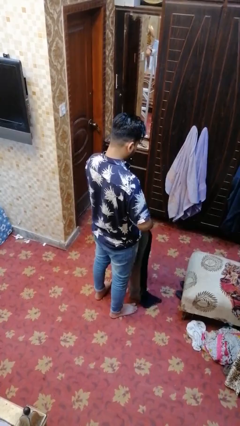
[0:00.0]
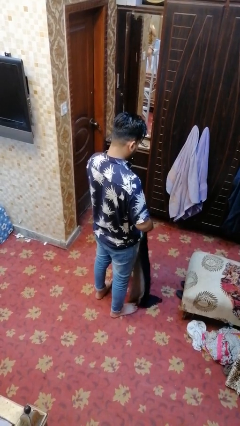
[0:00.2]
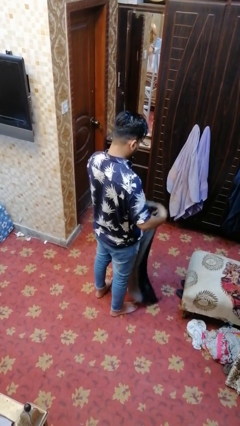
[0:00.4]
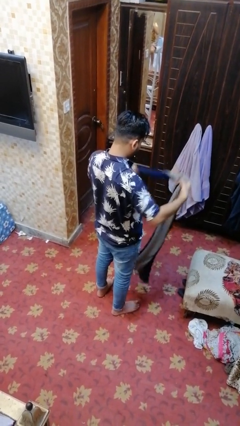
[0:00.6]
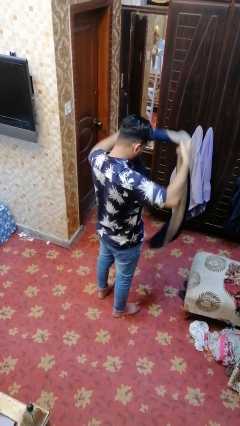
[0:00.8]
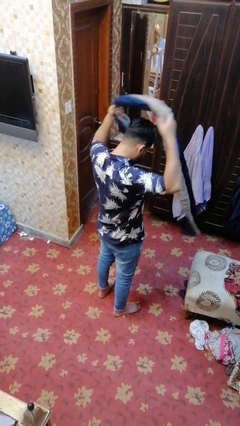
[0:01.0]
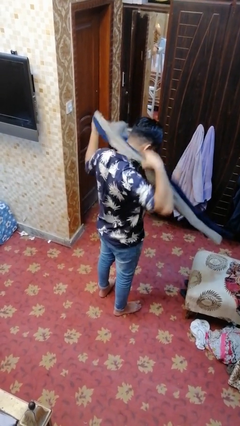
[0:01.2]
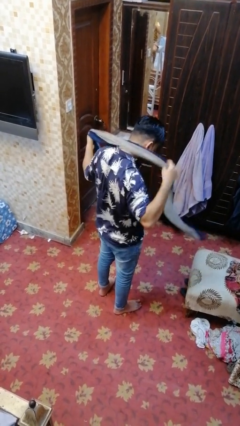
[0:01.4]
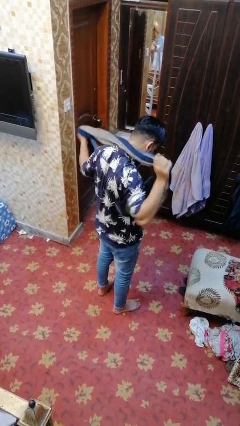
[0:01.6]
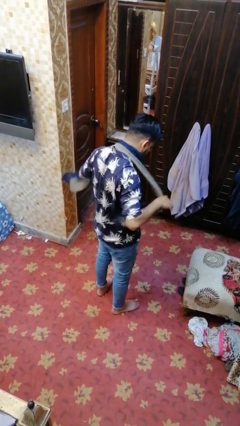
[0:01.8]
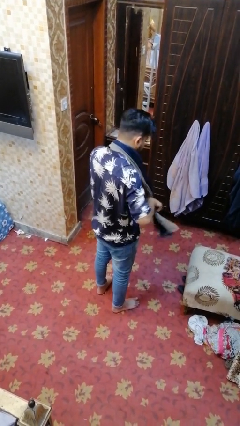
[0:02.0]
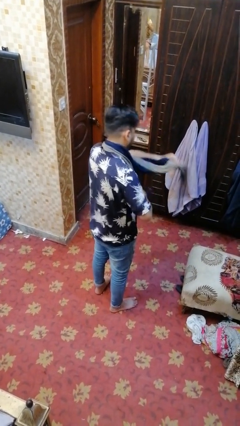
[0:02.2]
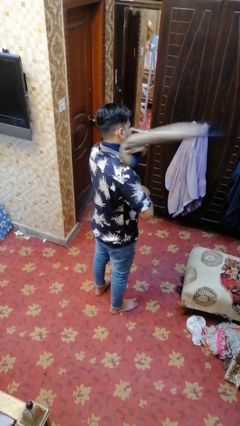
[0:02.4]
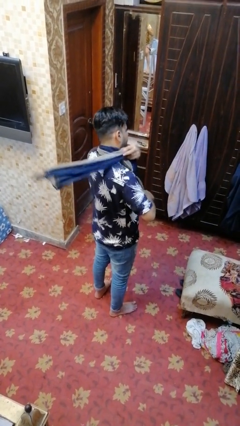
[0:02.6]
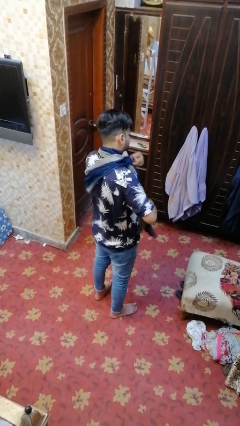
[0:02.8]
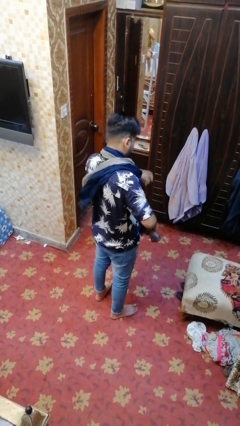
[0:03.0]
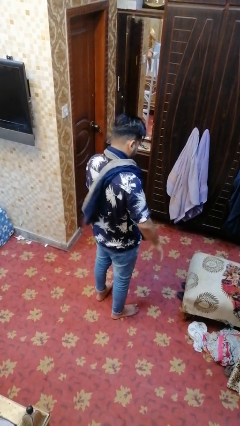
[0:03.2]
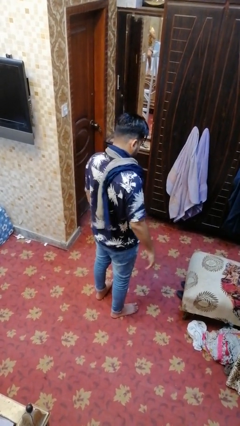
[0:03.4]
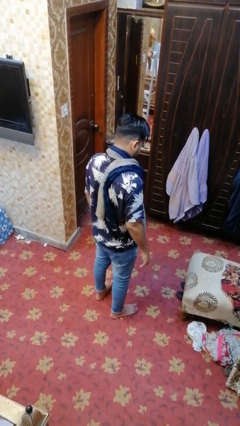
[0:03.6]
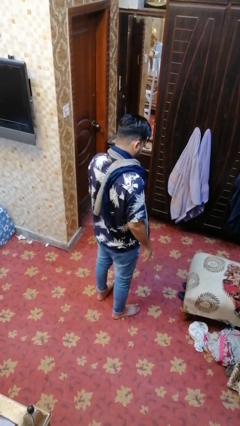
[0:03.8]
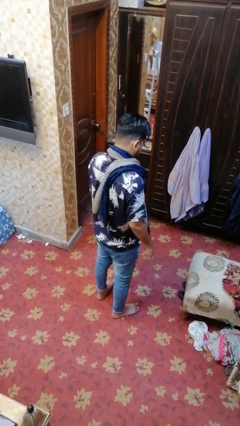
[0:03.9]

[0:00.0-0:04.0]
person puts on scarf

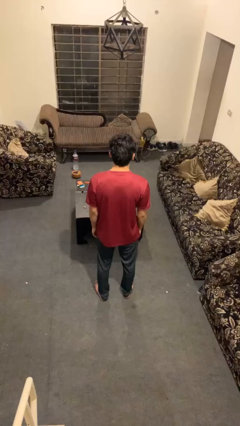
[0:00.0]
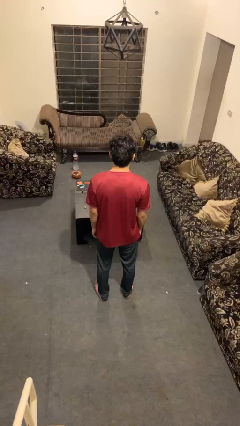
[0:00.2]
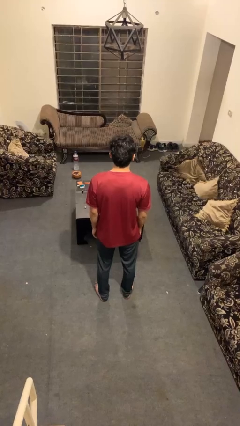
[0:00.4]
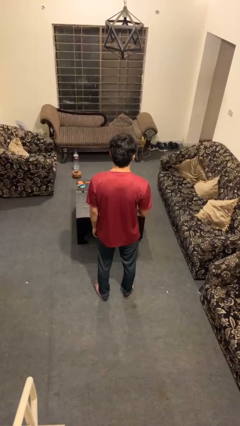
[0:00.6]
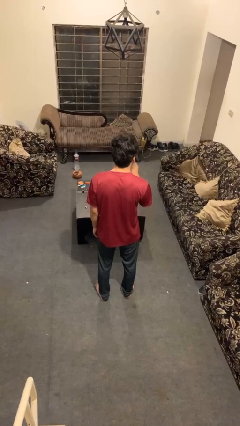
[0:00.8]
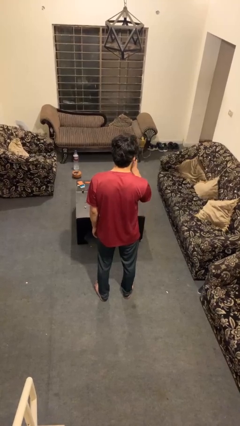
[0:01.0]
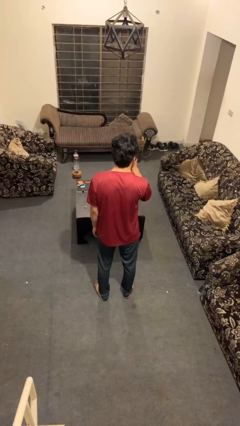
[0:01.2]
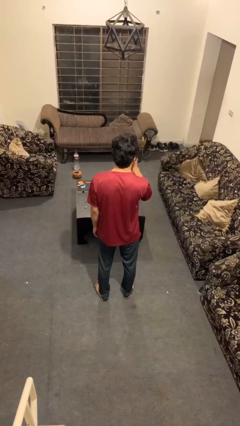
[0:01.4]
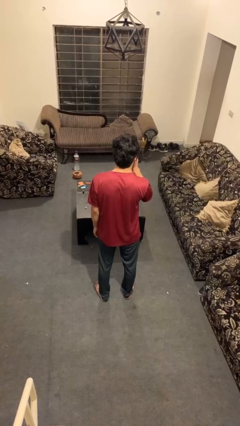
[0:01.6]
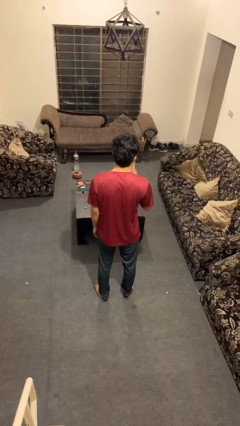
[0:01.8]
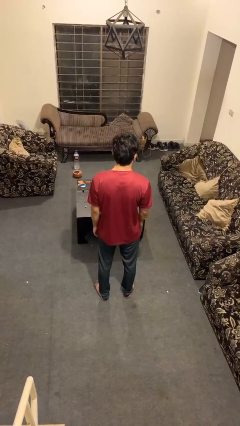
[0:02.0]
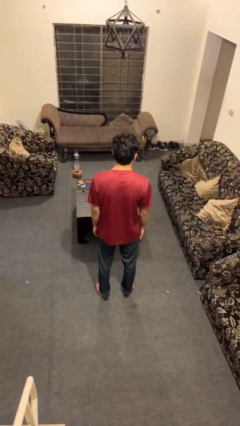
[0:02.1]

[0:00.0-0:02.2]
person gestures be quiet

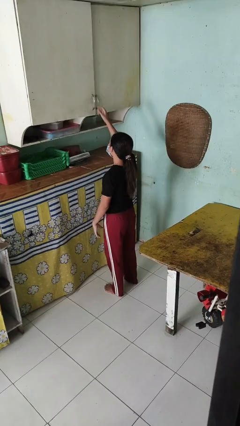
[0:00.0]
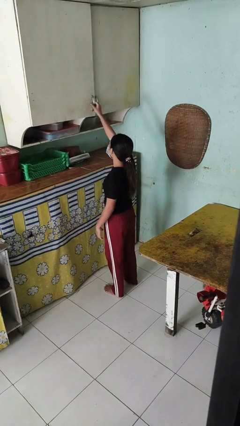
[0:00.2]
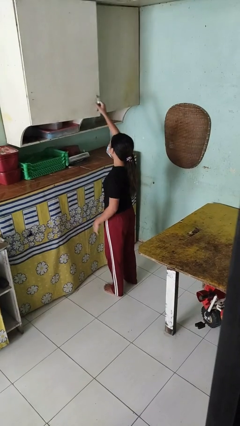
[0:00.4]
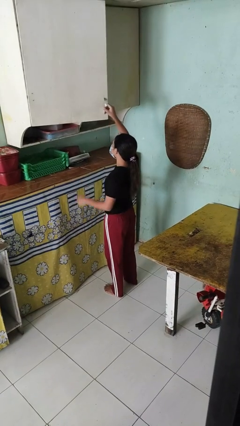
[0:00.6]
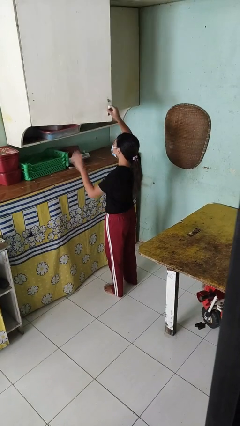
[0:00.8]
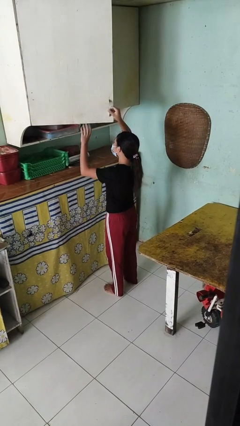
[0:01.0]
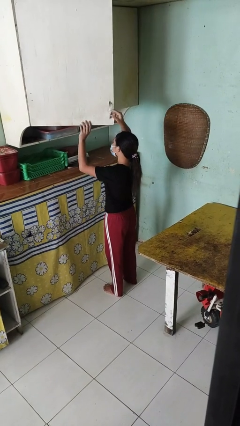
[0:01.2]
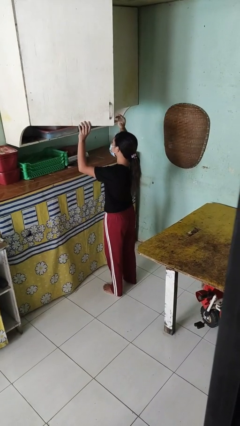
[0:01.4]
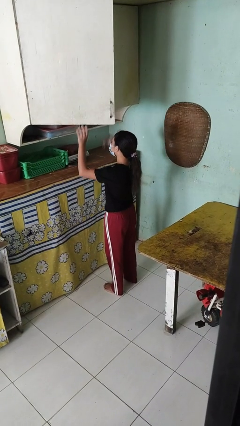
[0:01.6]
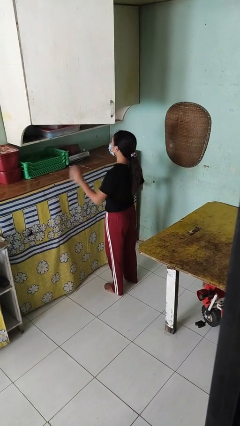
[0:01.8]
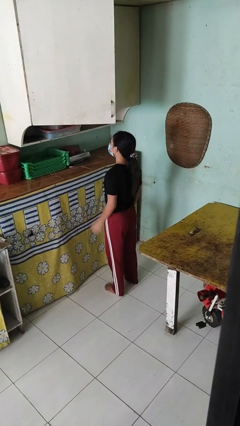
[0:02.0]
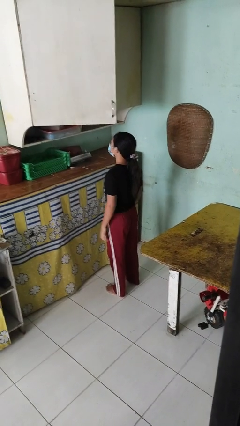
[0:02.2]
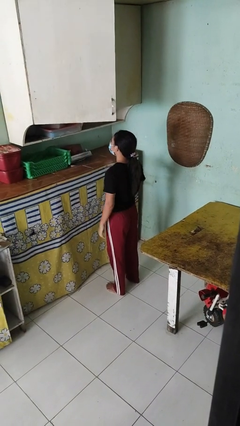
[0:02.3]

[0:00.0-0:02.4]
person opens cabinet

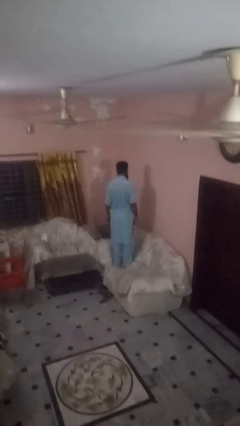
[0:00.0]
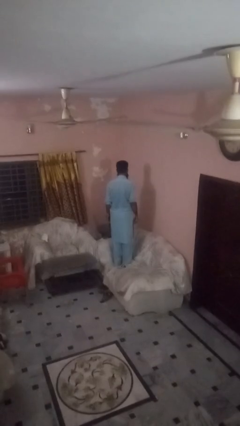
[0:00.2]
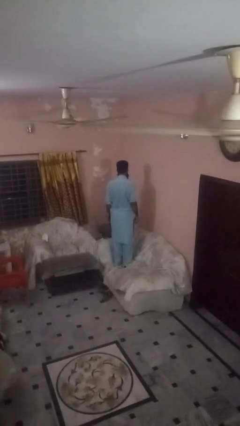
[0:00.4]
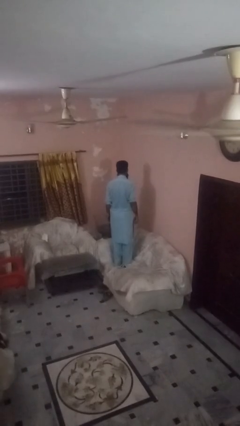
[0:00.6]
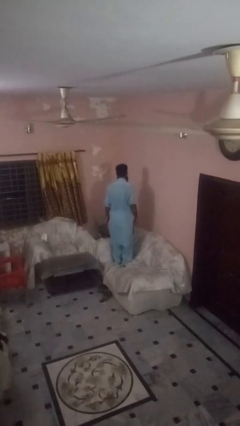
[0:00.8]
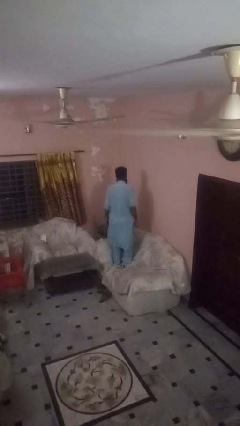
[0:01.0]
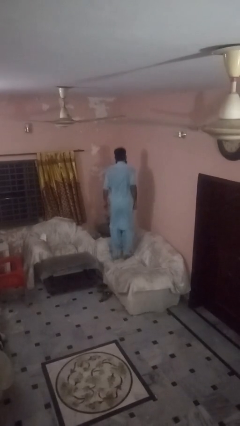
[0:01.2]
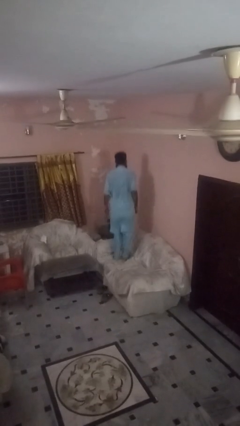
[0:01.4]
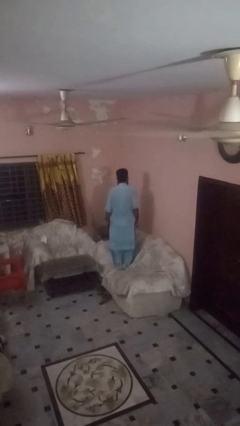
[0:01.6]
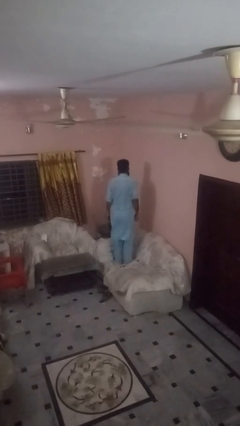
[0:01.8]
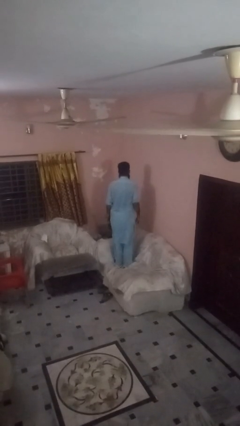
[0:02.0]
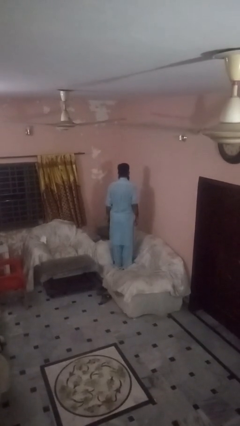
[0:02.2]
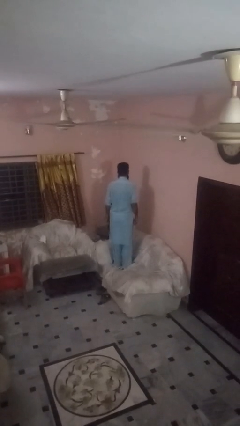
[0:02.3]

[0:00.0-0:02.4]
person jumps on couch

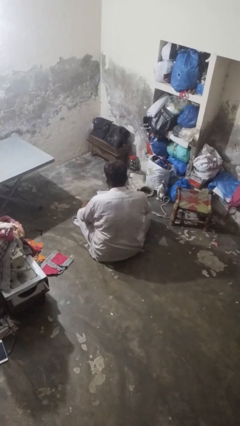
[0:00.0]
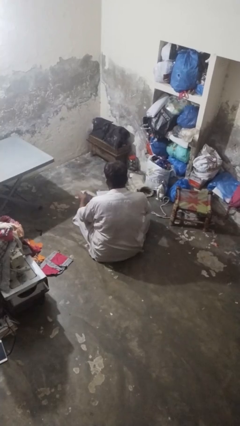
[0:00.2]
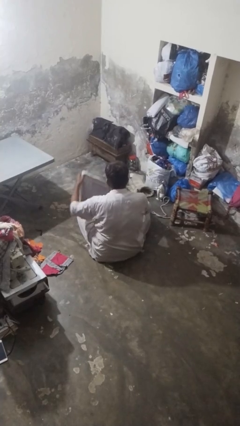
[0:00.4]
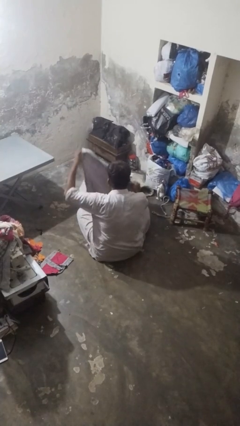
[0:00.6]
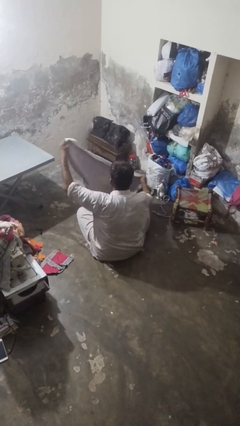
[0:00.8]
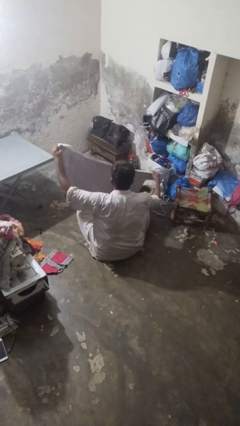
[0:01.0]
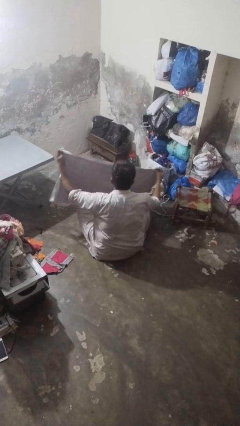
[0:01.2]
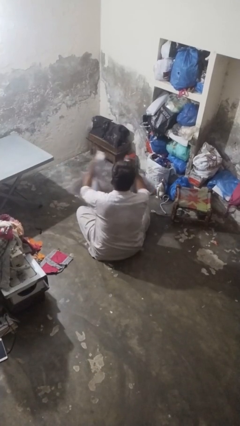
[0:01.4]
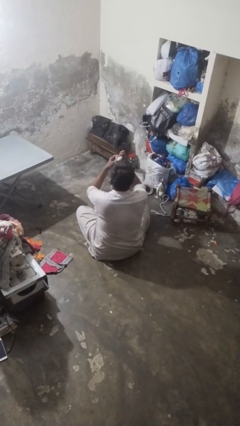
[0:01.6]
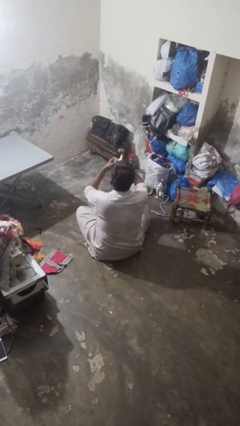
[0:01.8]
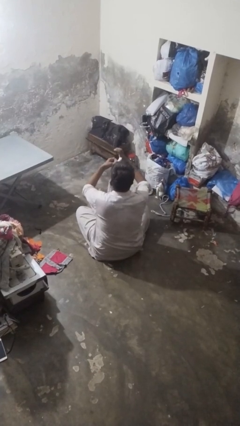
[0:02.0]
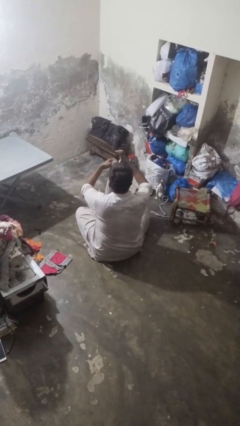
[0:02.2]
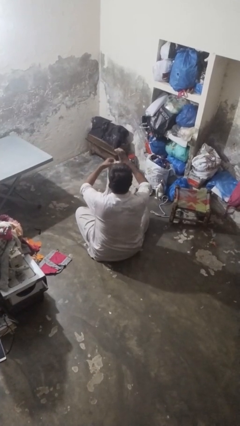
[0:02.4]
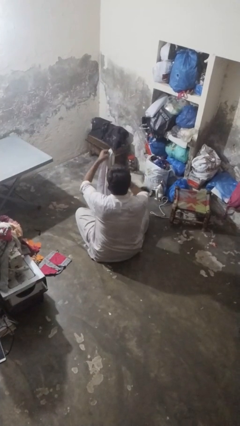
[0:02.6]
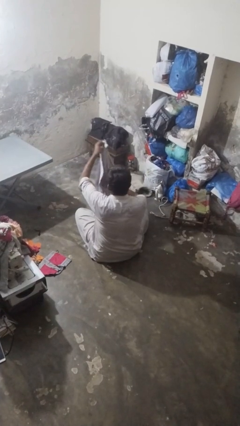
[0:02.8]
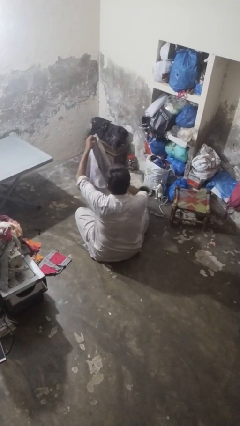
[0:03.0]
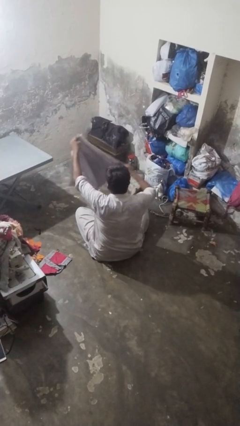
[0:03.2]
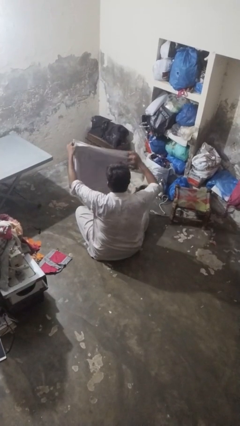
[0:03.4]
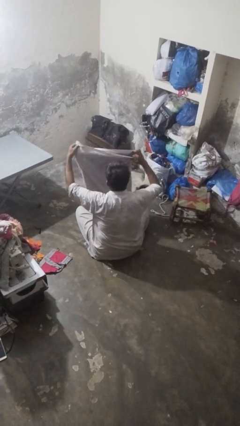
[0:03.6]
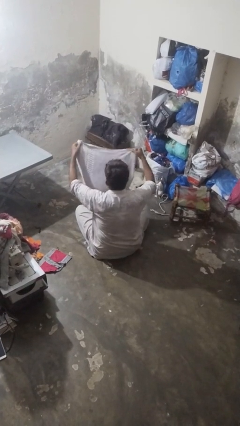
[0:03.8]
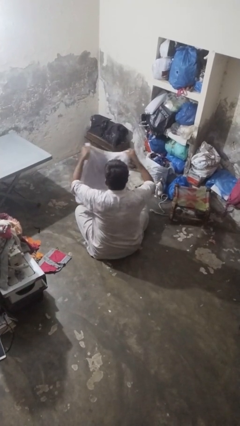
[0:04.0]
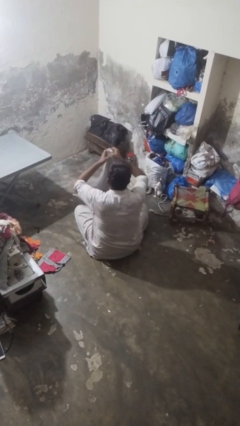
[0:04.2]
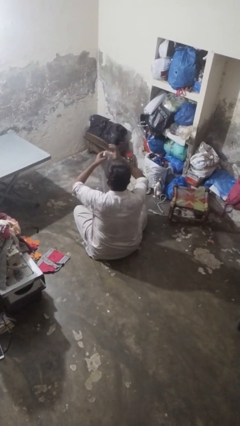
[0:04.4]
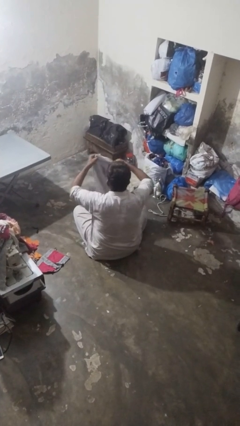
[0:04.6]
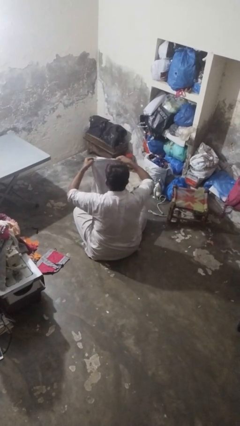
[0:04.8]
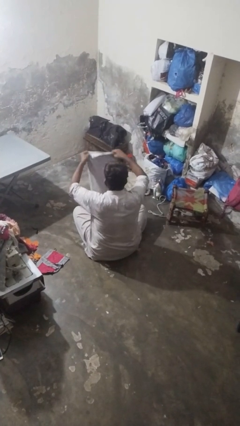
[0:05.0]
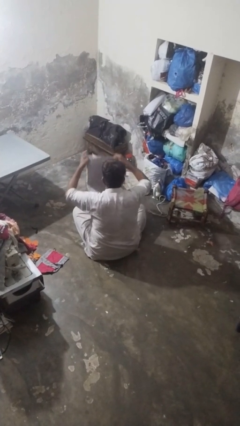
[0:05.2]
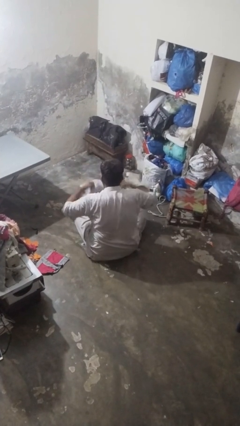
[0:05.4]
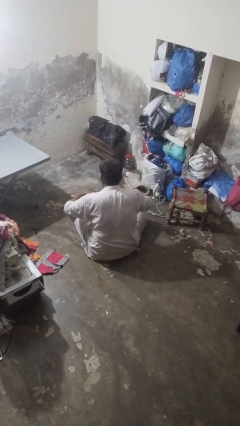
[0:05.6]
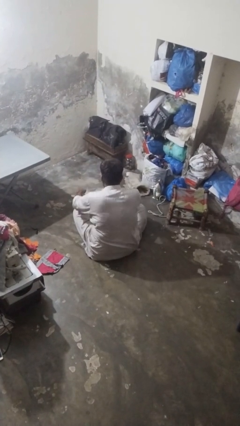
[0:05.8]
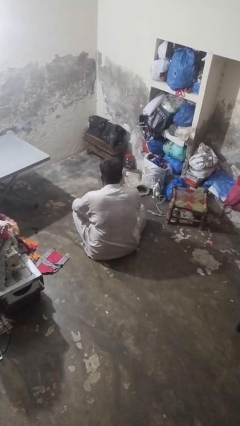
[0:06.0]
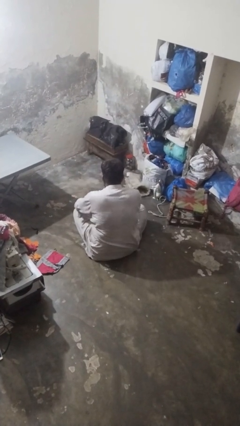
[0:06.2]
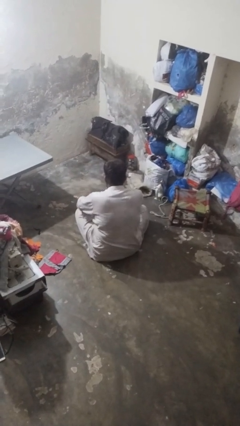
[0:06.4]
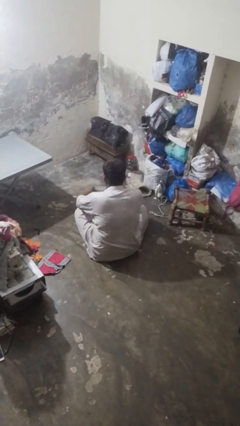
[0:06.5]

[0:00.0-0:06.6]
person folds towel
